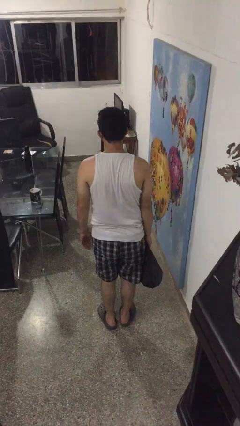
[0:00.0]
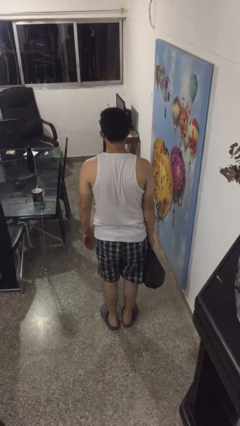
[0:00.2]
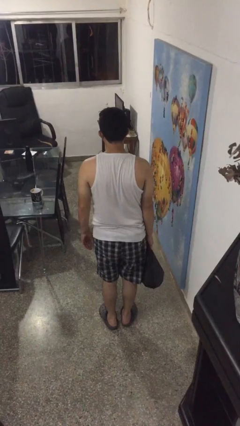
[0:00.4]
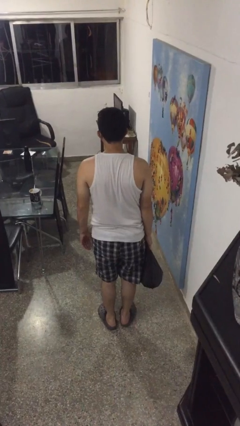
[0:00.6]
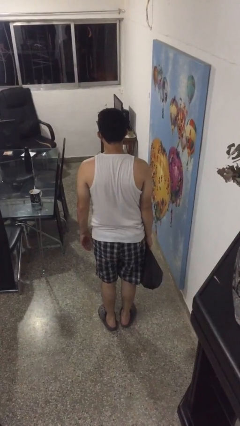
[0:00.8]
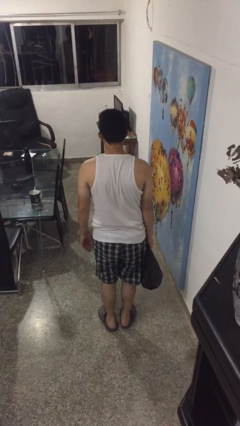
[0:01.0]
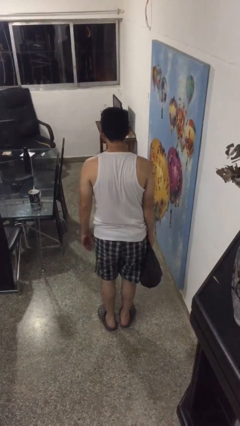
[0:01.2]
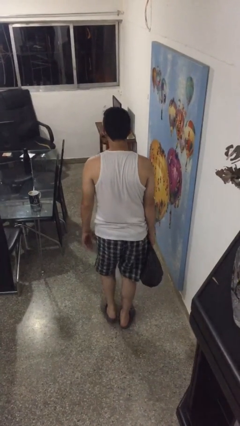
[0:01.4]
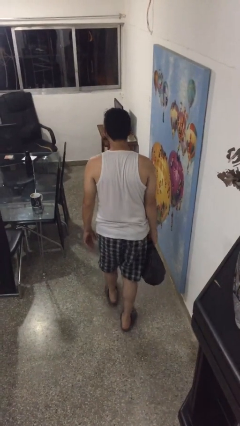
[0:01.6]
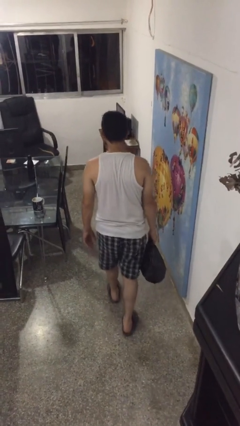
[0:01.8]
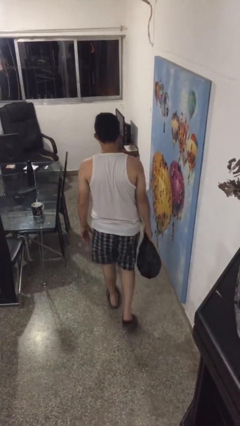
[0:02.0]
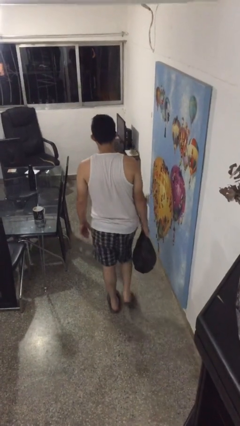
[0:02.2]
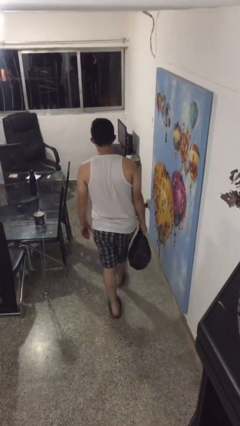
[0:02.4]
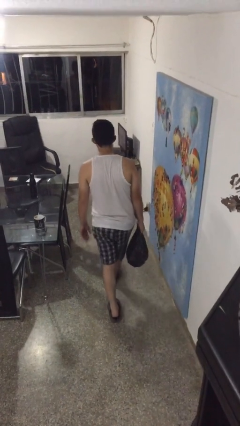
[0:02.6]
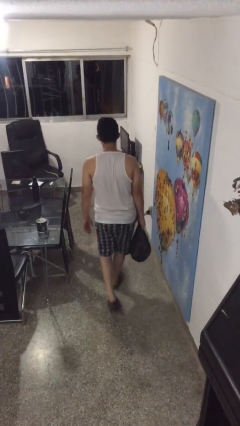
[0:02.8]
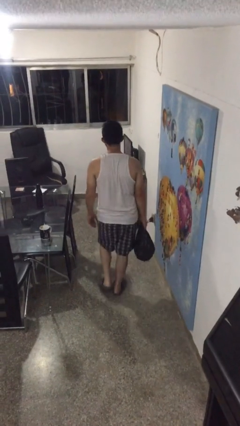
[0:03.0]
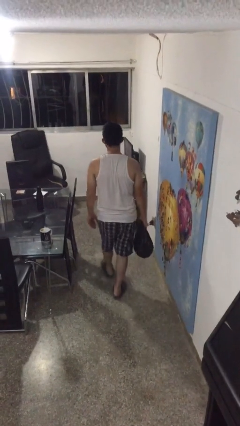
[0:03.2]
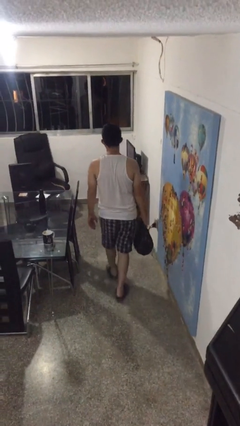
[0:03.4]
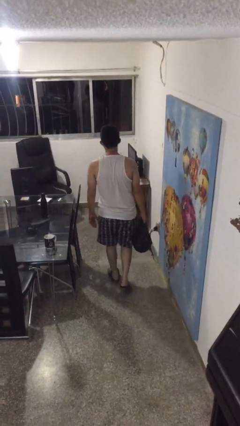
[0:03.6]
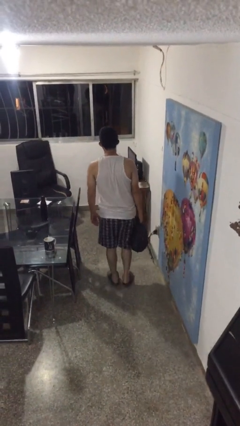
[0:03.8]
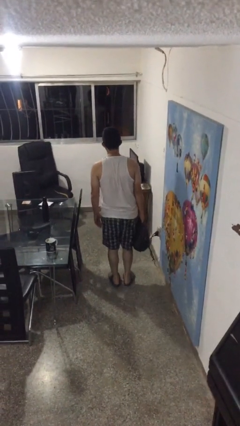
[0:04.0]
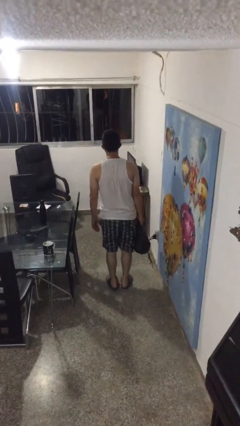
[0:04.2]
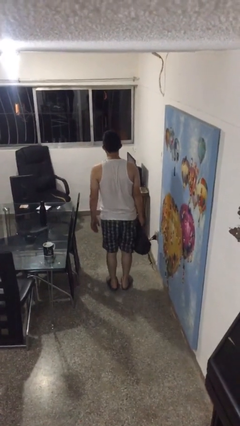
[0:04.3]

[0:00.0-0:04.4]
person carries groceries

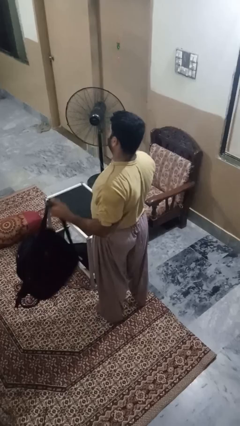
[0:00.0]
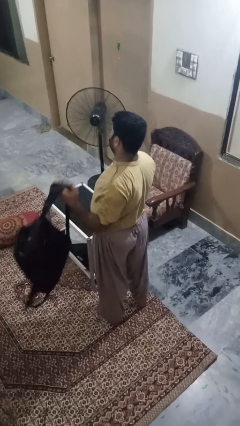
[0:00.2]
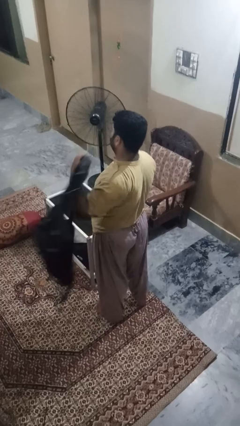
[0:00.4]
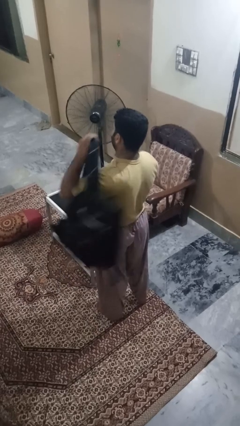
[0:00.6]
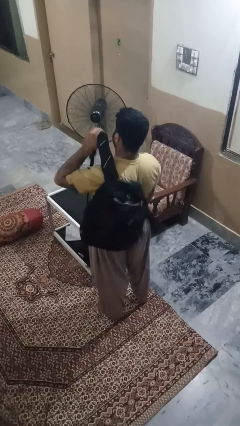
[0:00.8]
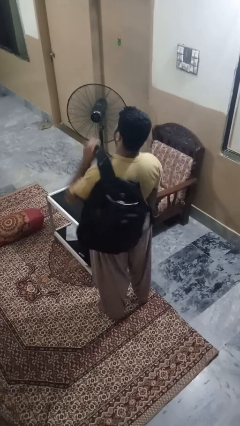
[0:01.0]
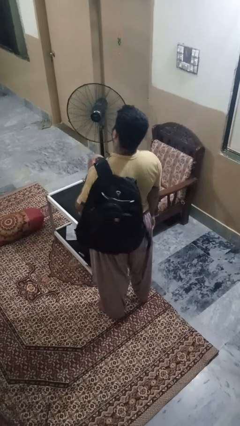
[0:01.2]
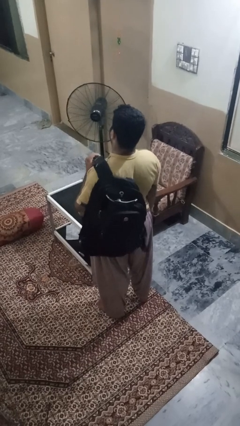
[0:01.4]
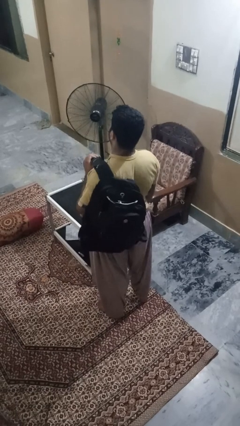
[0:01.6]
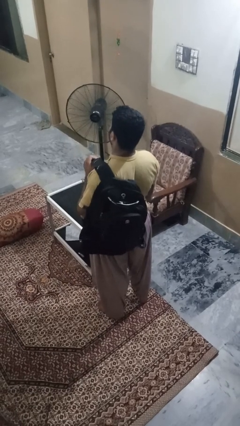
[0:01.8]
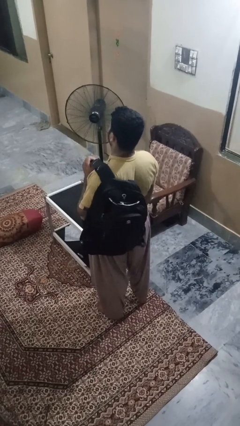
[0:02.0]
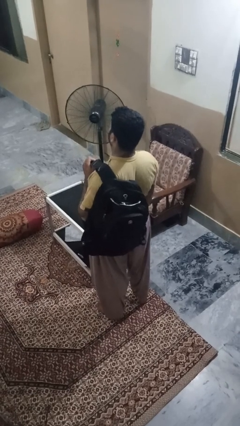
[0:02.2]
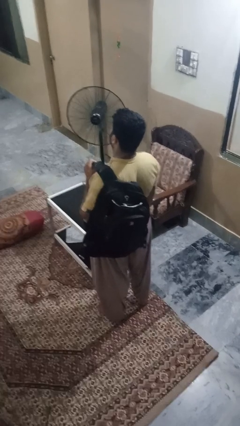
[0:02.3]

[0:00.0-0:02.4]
person puts on backpack

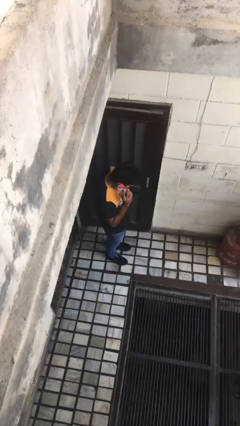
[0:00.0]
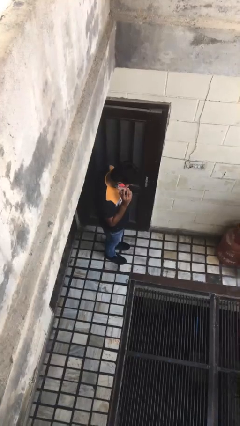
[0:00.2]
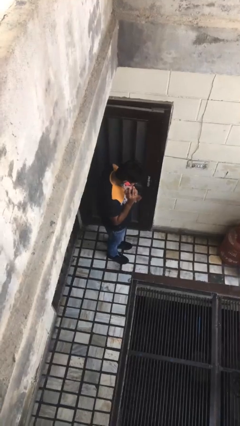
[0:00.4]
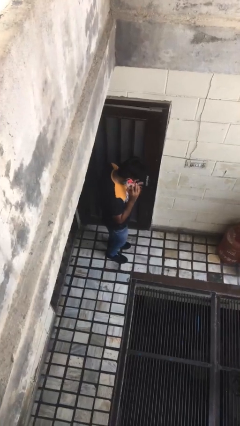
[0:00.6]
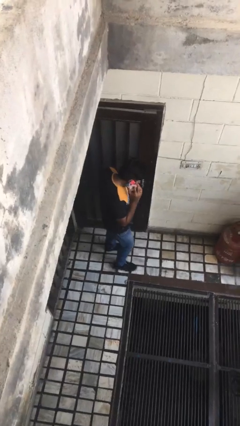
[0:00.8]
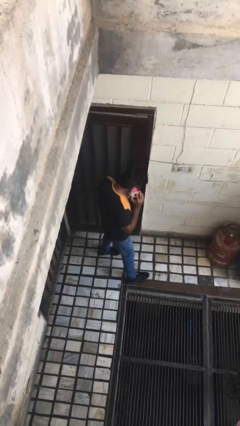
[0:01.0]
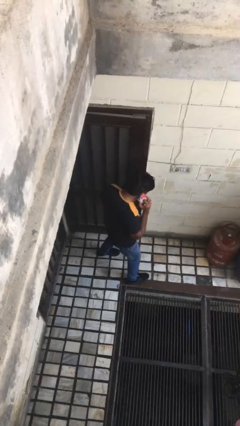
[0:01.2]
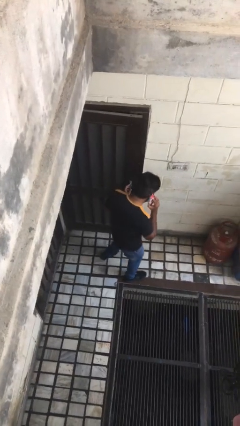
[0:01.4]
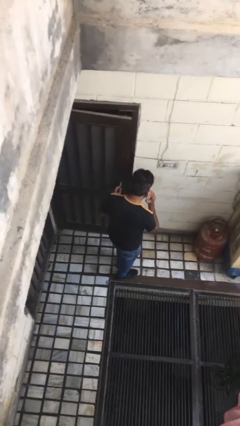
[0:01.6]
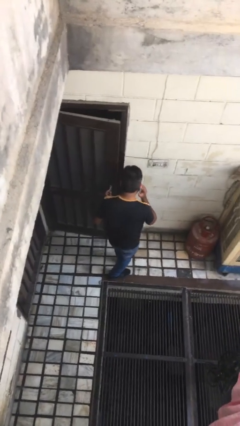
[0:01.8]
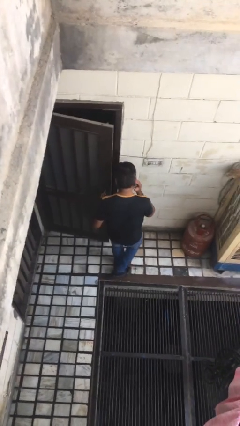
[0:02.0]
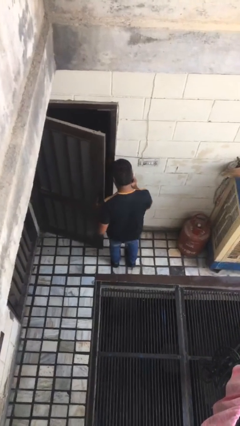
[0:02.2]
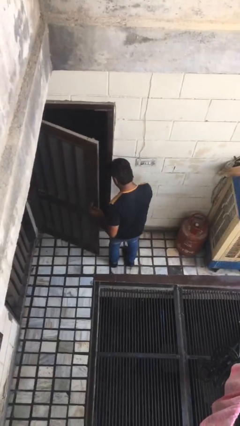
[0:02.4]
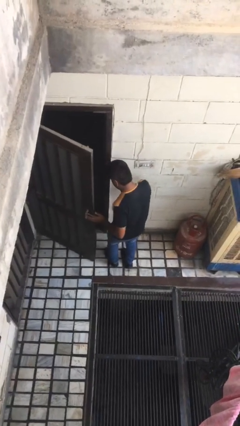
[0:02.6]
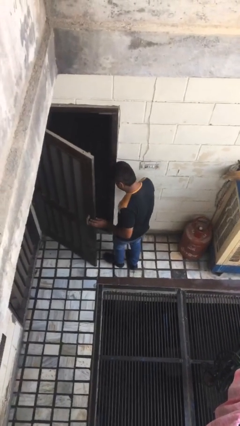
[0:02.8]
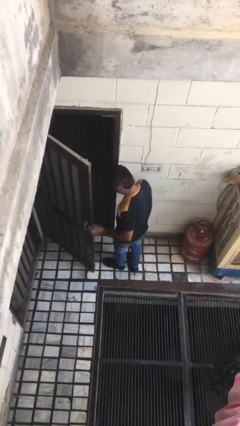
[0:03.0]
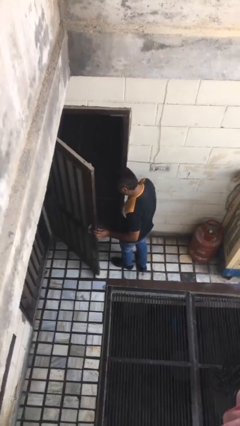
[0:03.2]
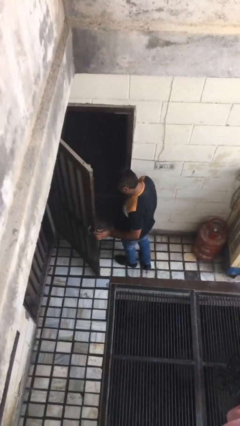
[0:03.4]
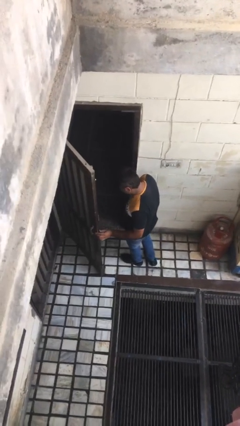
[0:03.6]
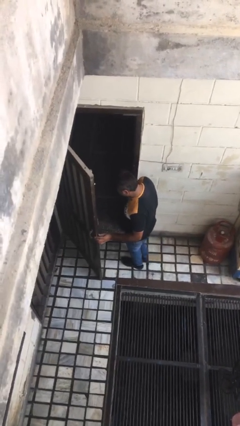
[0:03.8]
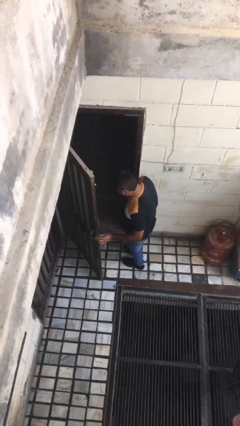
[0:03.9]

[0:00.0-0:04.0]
person opens facility door

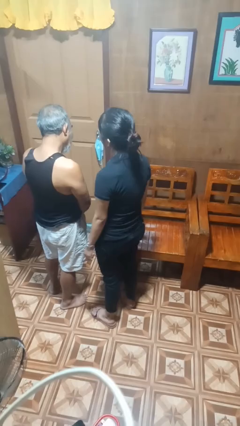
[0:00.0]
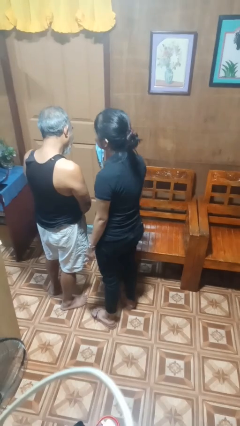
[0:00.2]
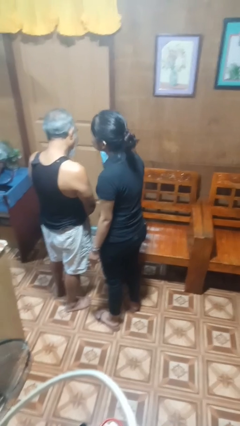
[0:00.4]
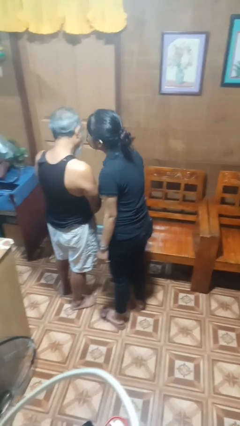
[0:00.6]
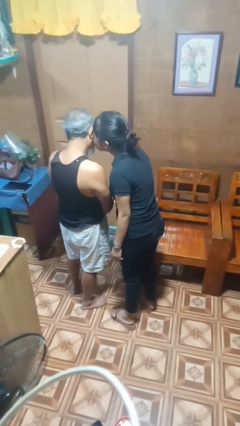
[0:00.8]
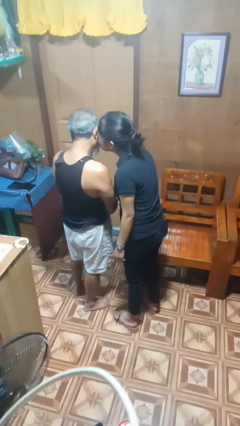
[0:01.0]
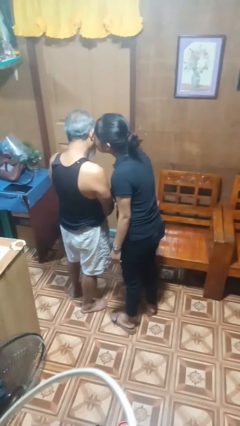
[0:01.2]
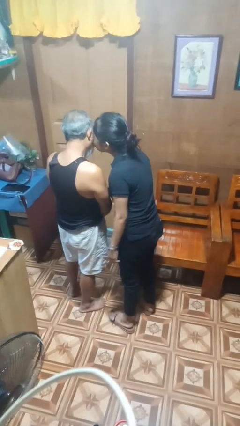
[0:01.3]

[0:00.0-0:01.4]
person kisses cheek of person

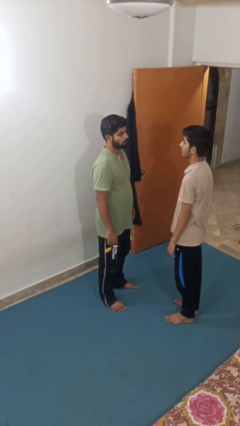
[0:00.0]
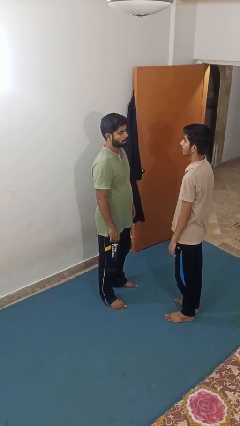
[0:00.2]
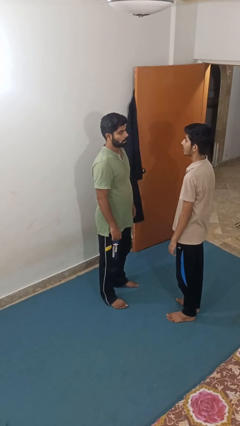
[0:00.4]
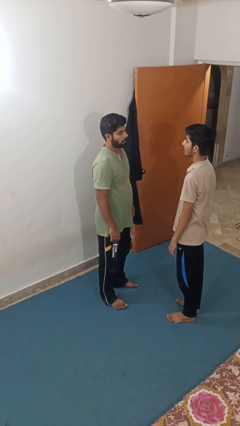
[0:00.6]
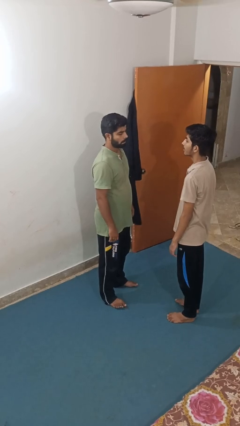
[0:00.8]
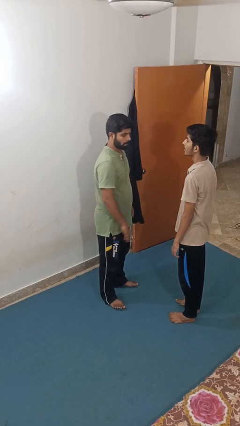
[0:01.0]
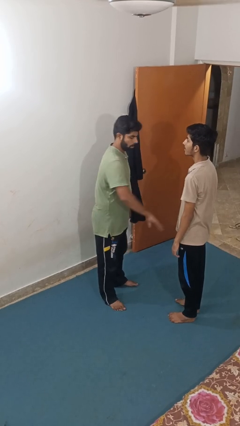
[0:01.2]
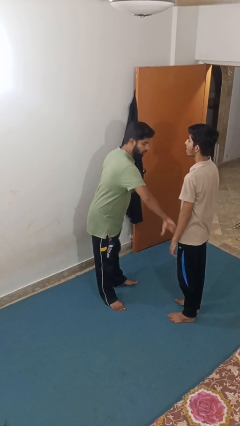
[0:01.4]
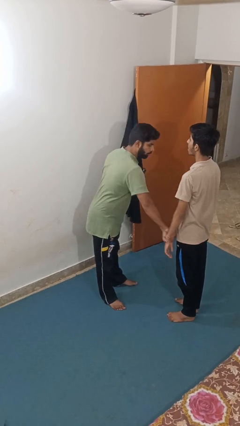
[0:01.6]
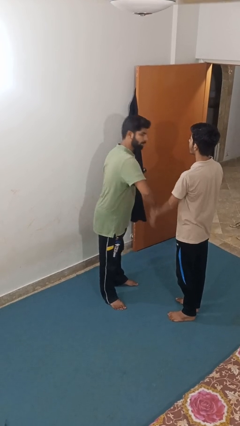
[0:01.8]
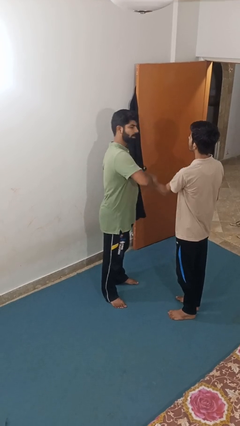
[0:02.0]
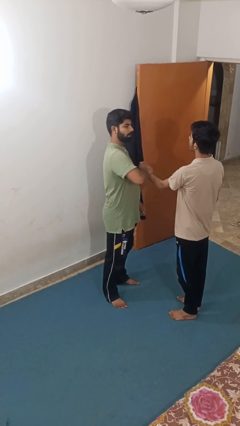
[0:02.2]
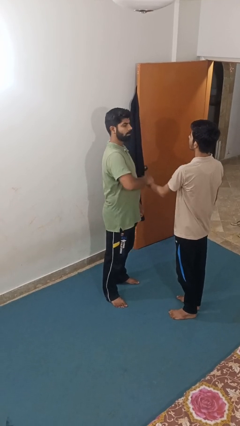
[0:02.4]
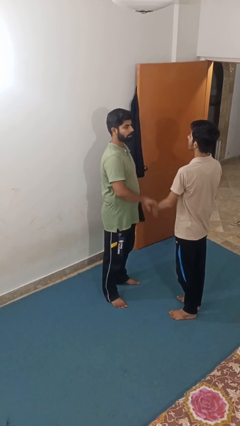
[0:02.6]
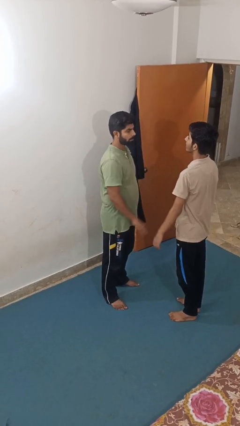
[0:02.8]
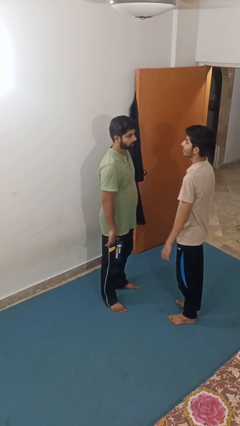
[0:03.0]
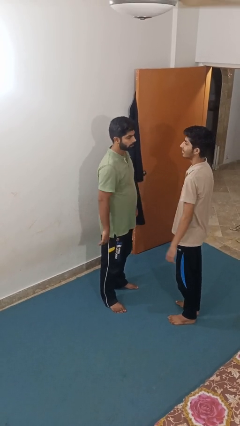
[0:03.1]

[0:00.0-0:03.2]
person grabs person by forearm

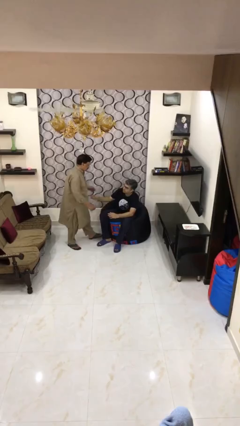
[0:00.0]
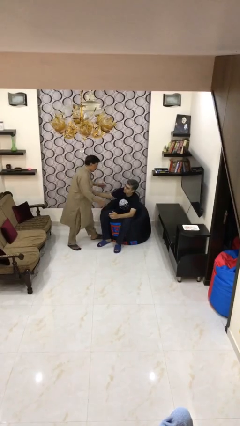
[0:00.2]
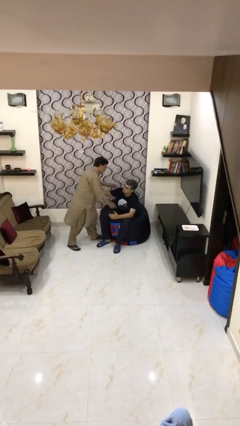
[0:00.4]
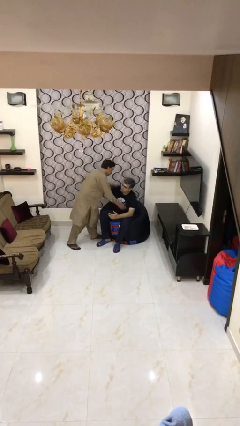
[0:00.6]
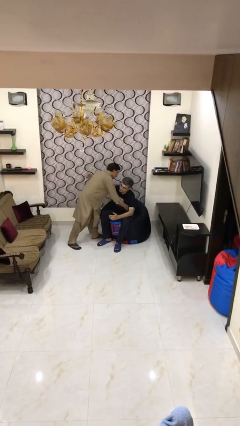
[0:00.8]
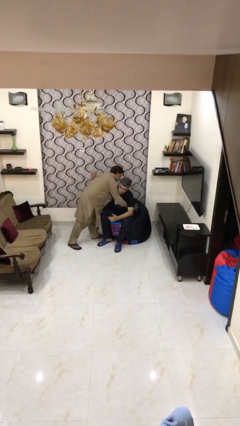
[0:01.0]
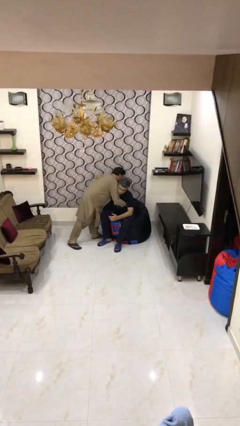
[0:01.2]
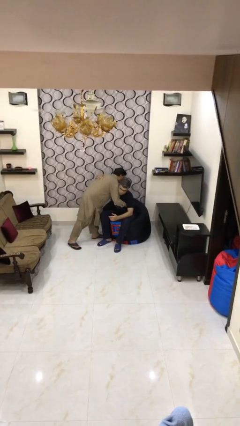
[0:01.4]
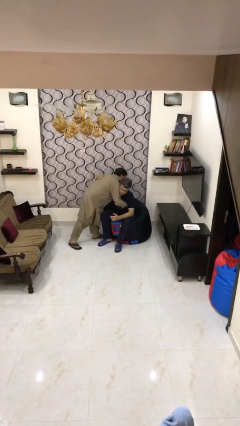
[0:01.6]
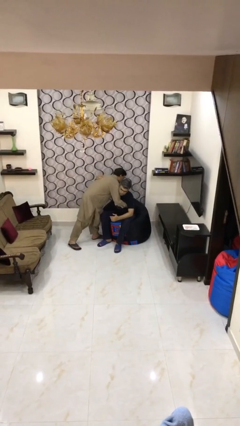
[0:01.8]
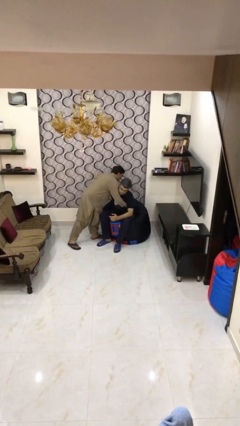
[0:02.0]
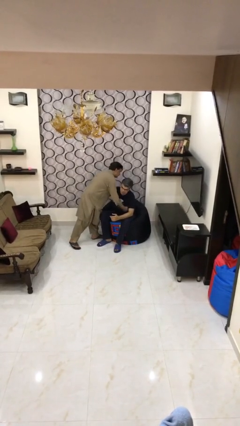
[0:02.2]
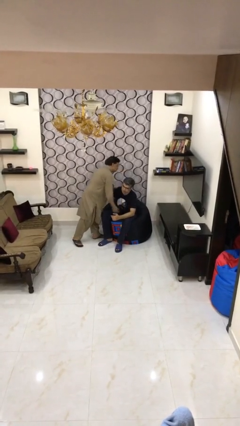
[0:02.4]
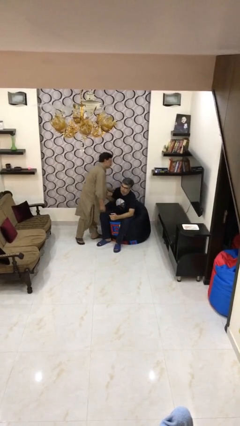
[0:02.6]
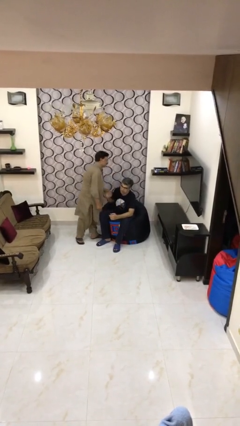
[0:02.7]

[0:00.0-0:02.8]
person embraces person
